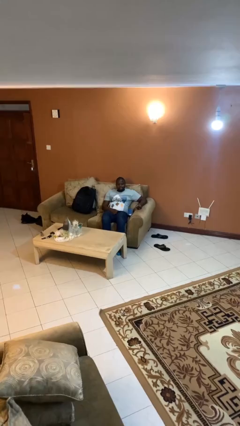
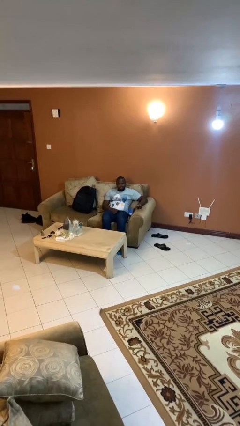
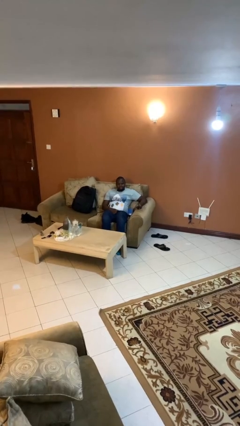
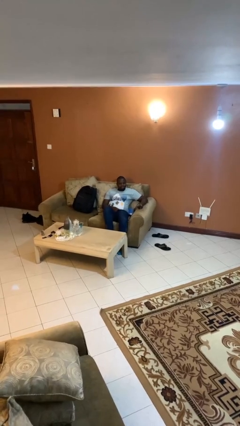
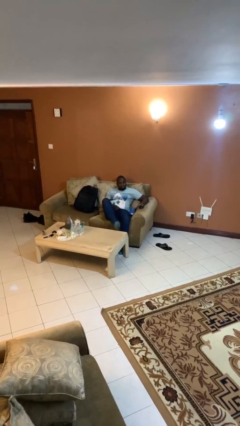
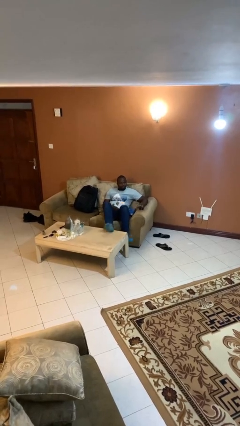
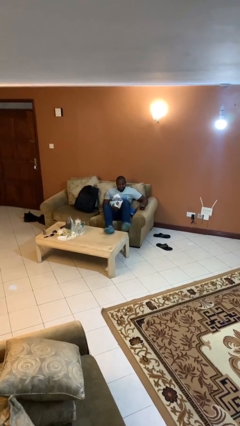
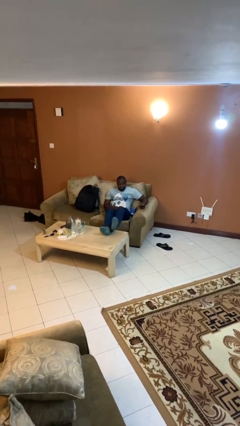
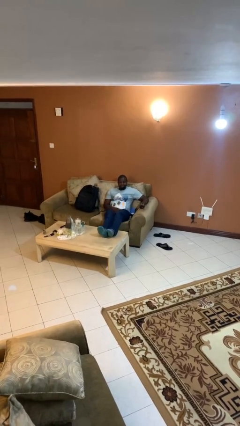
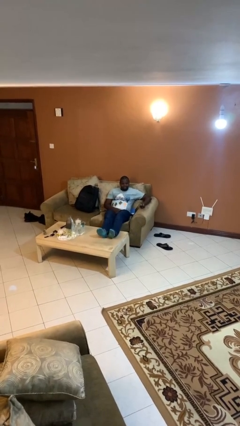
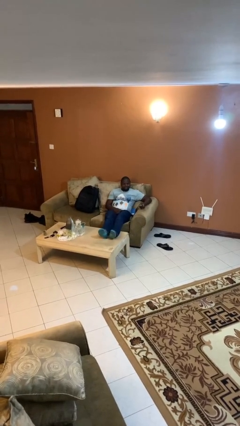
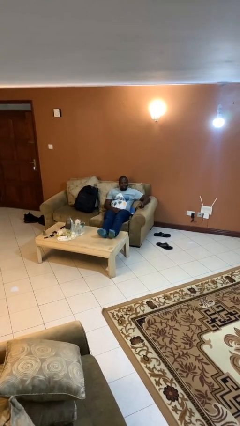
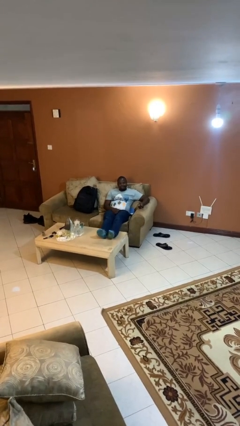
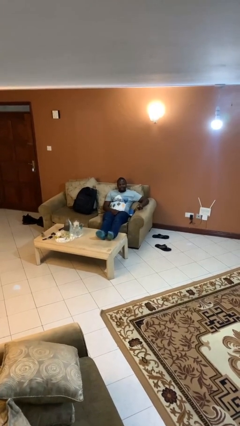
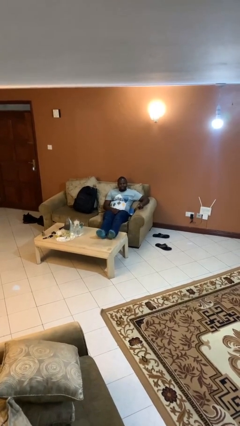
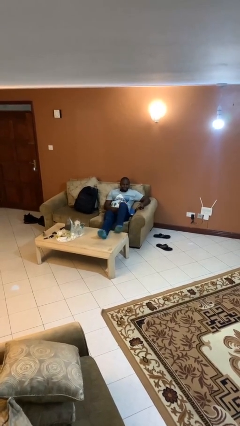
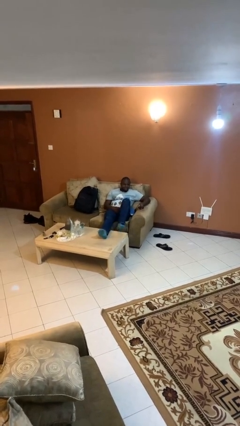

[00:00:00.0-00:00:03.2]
person puts feet up

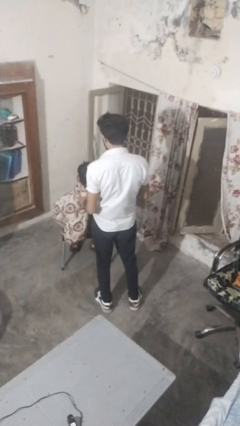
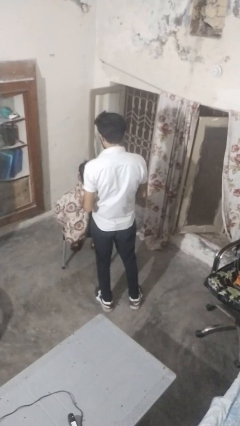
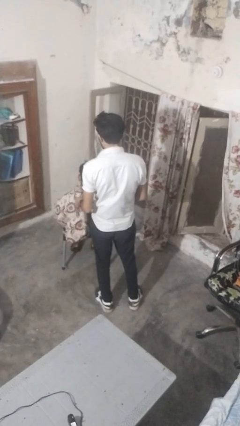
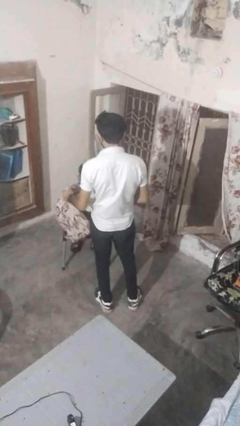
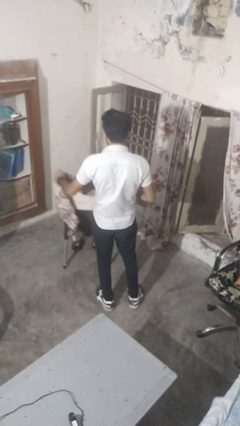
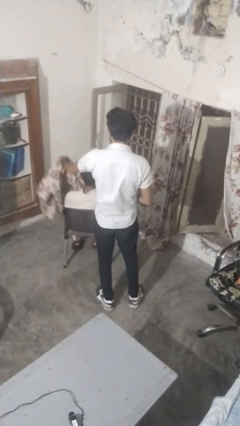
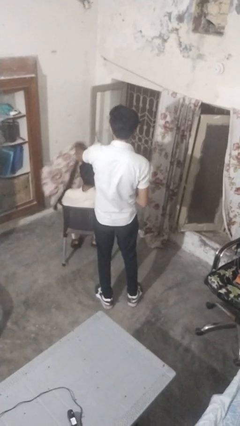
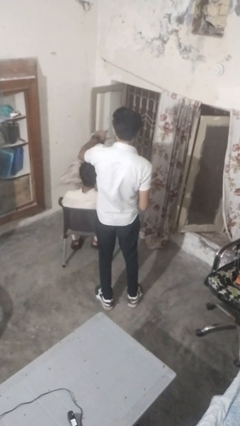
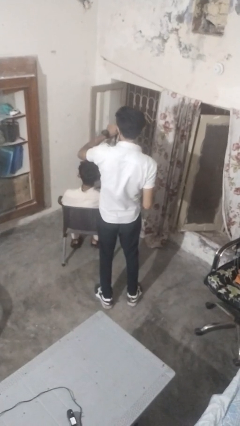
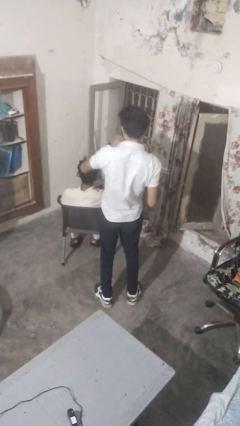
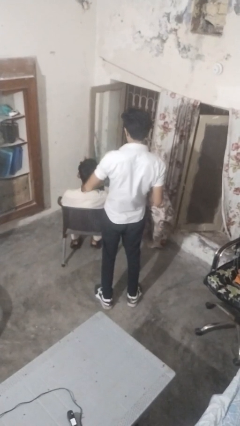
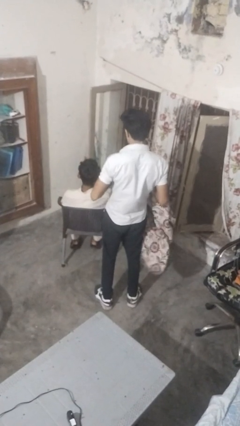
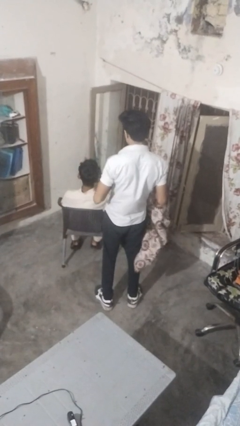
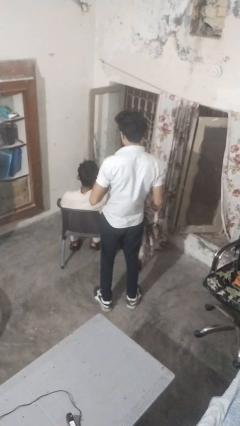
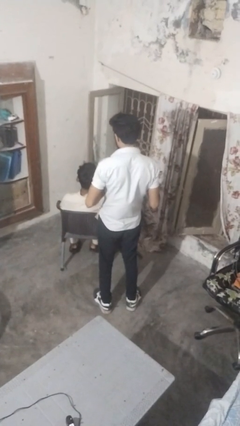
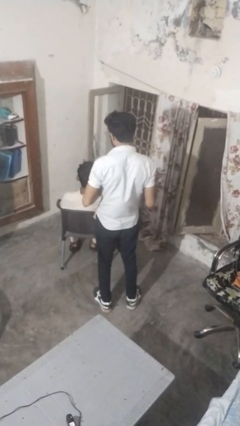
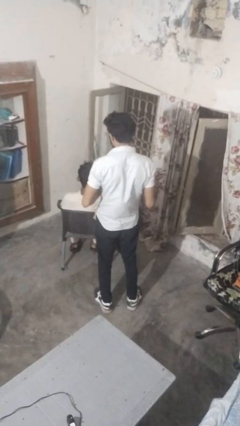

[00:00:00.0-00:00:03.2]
person uncovers friend with blanket

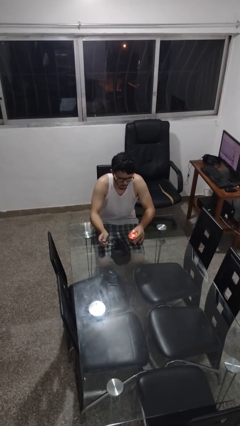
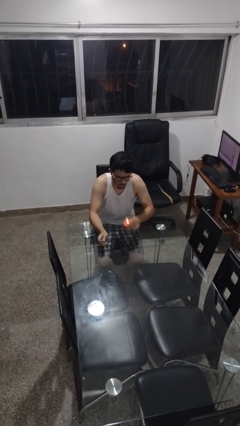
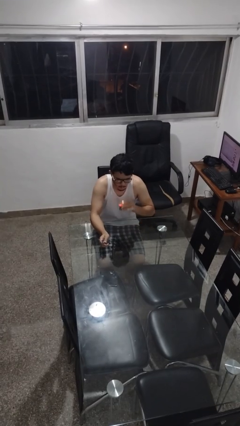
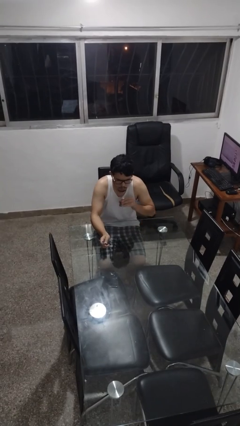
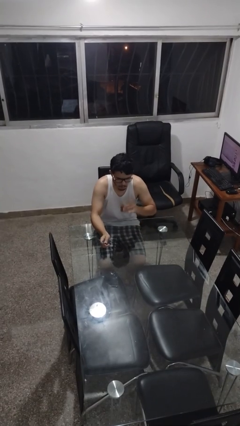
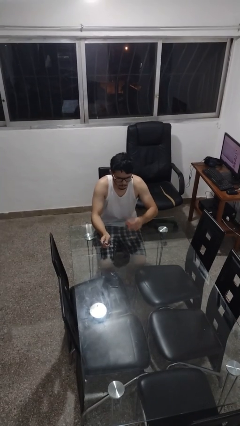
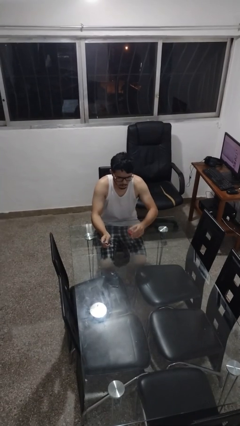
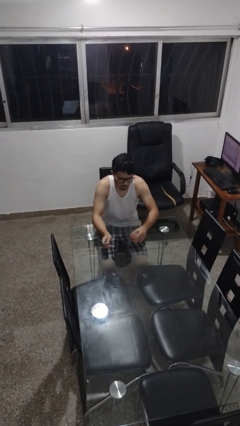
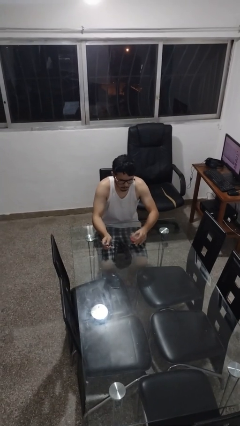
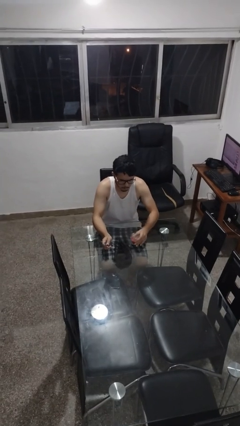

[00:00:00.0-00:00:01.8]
person extinguishes candle

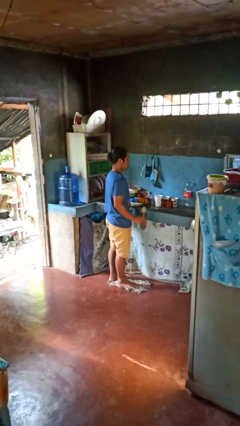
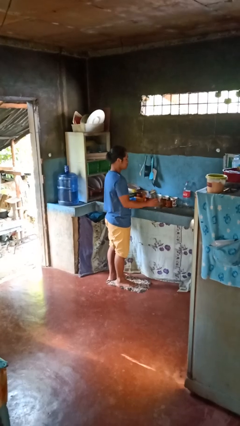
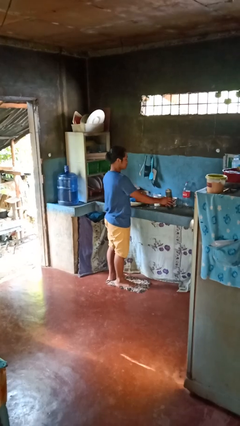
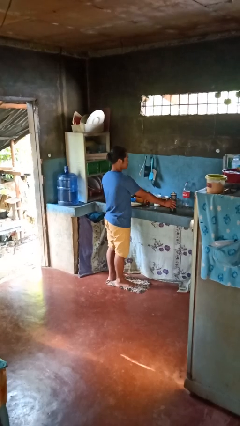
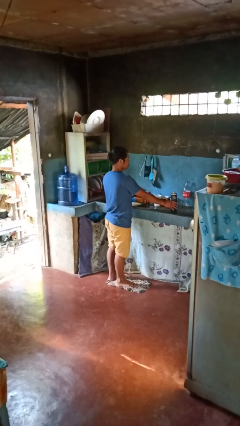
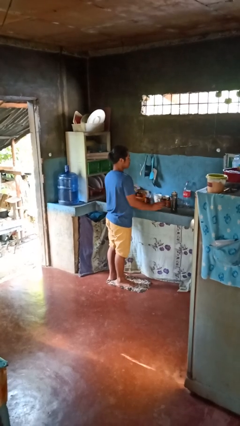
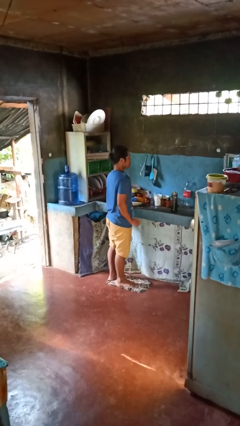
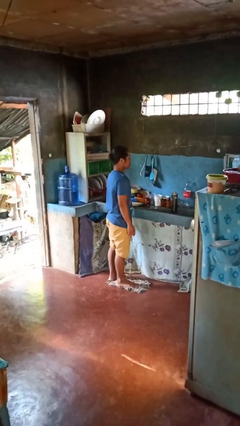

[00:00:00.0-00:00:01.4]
person puts down object on countertop

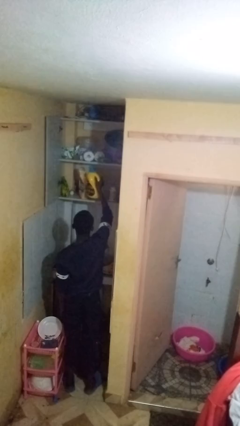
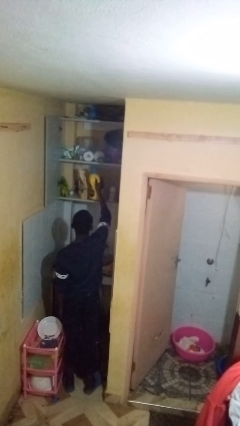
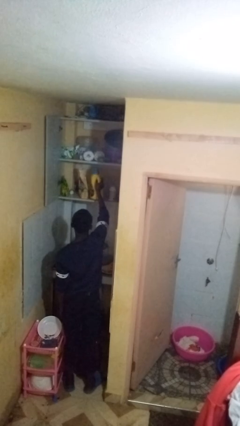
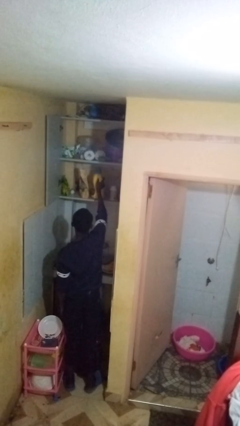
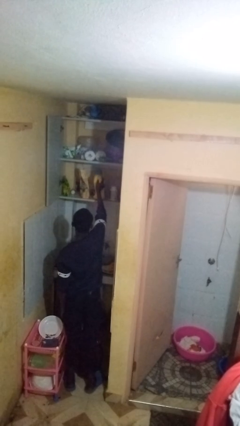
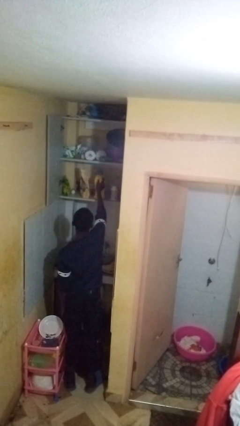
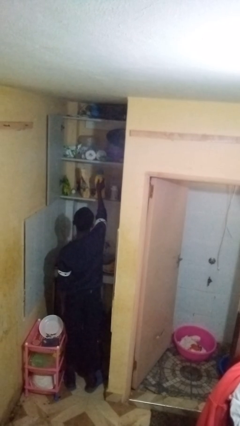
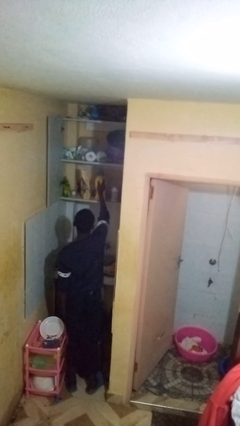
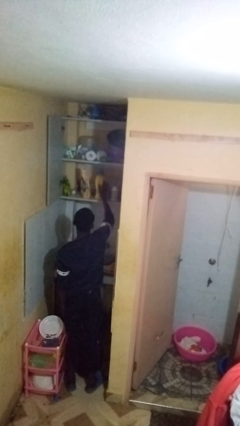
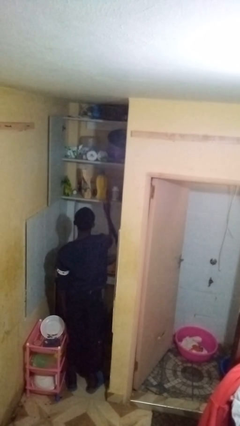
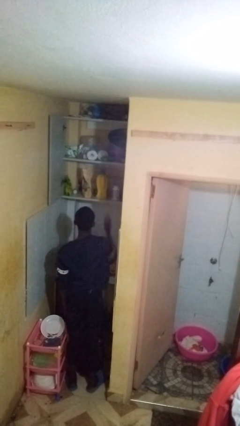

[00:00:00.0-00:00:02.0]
person puts object in cabinet

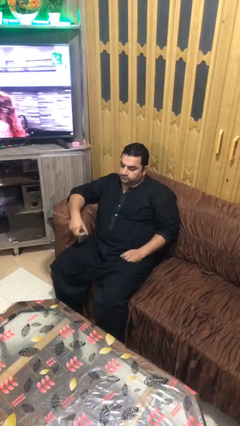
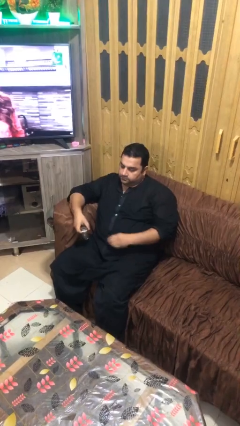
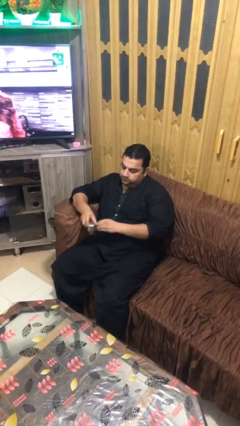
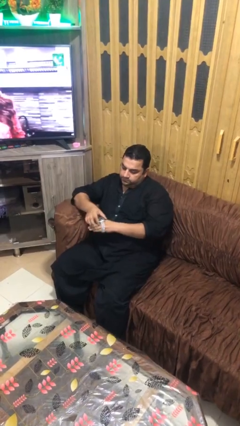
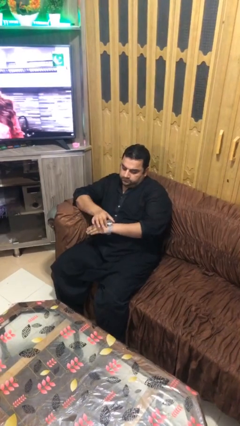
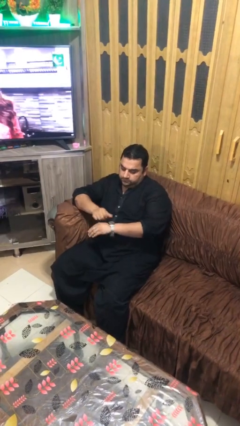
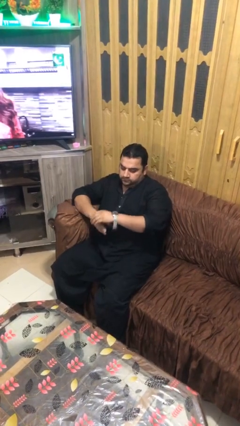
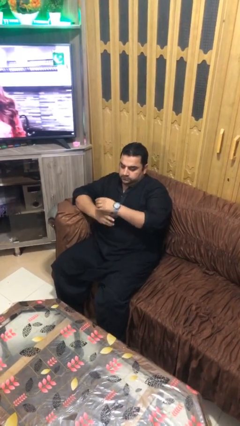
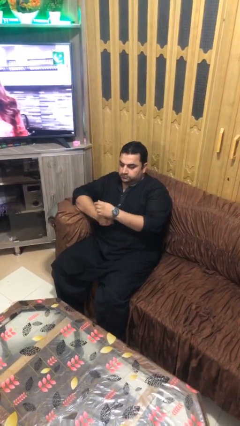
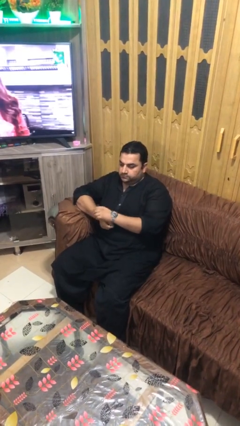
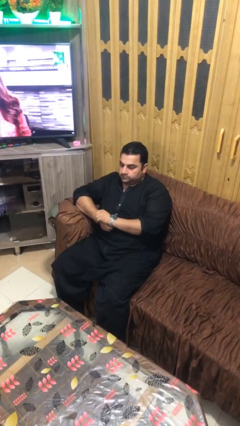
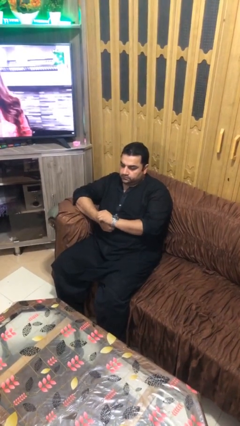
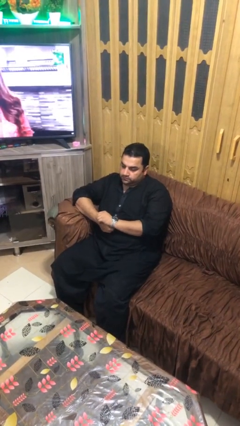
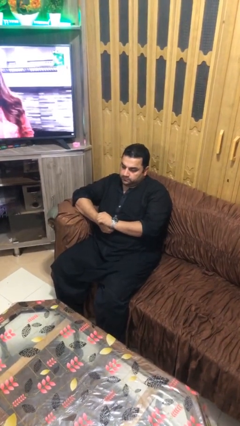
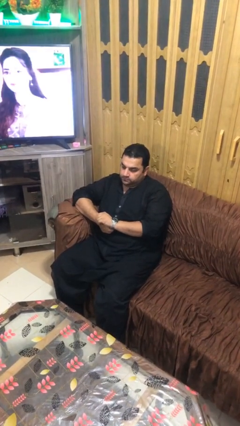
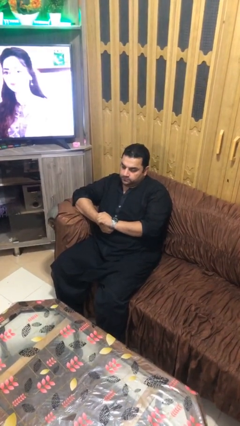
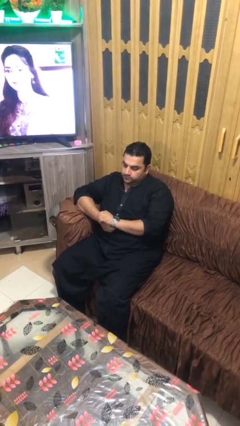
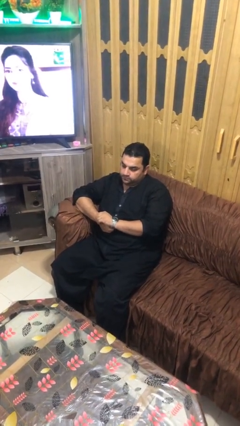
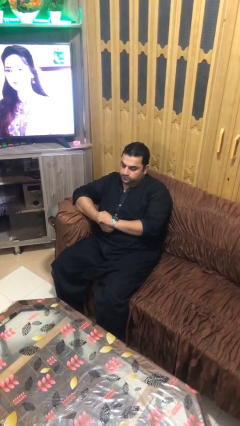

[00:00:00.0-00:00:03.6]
person puts on wristwatch

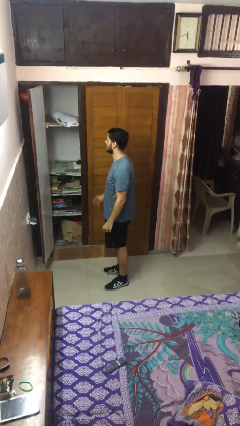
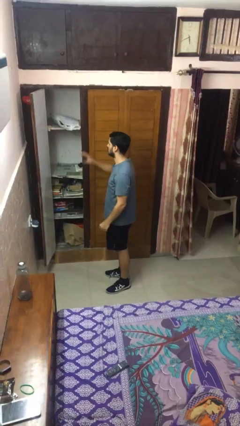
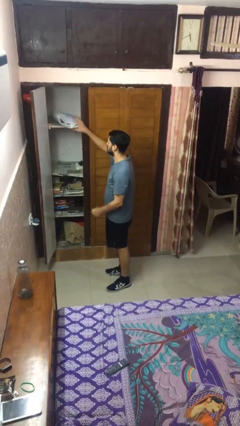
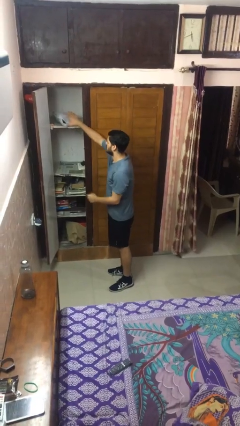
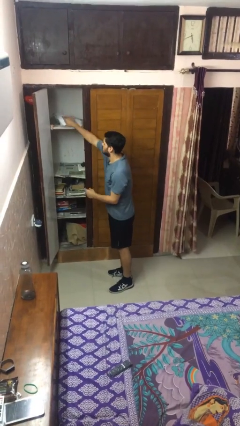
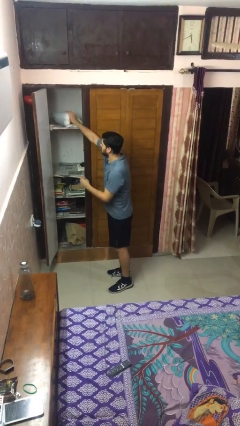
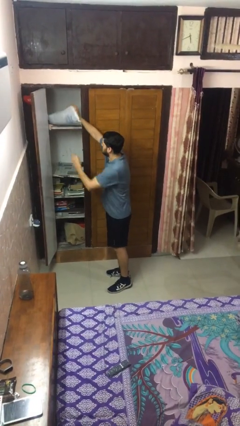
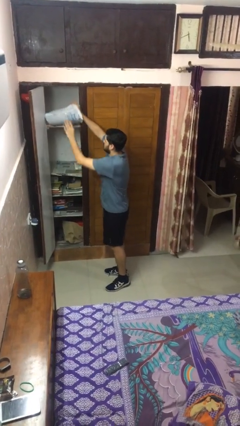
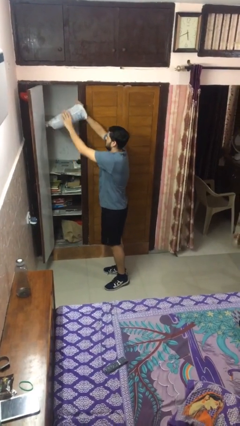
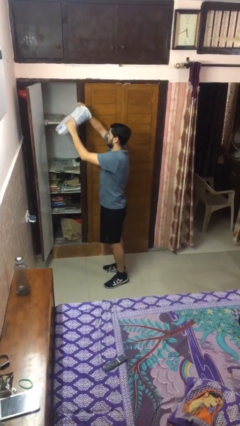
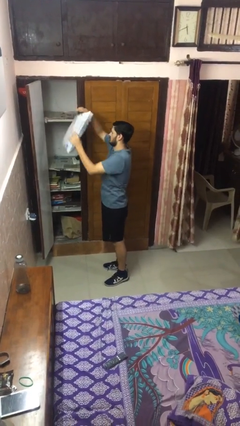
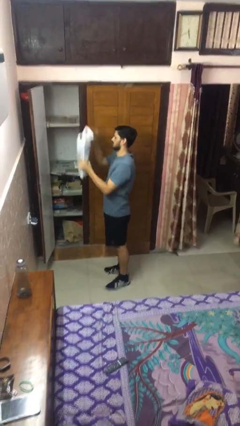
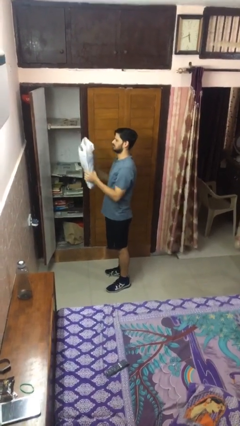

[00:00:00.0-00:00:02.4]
person picks up object from shelf
